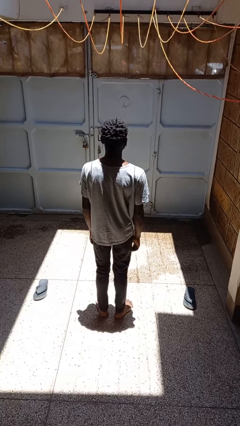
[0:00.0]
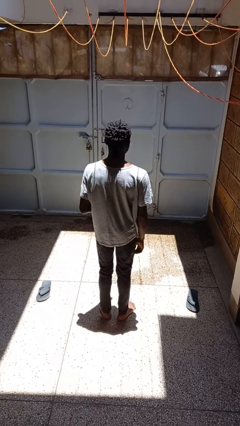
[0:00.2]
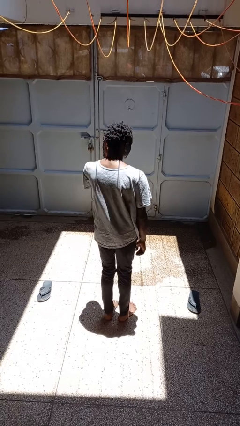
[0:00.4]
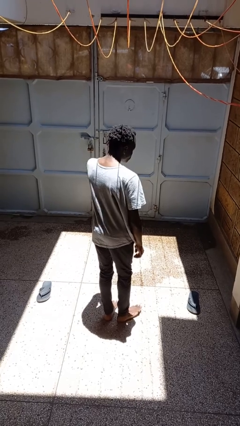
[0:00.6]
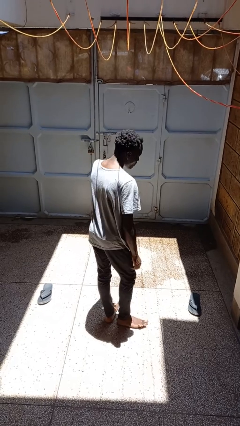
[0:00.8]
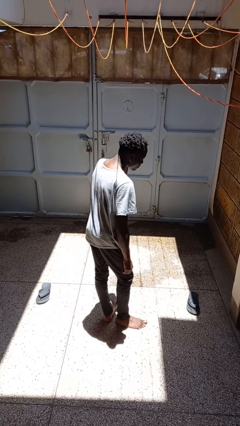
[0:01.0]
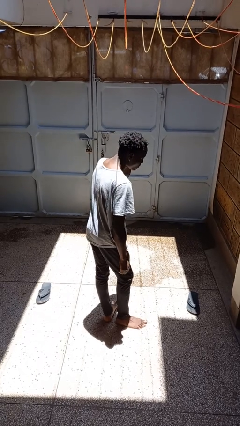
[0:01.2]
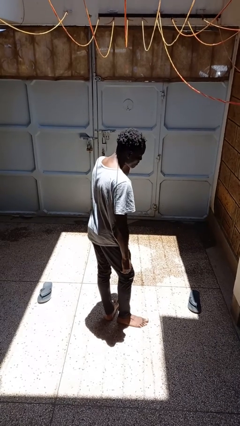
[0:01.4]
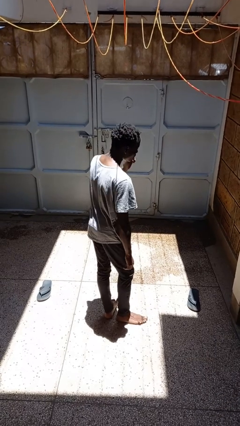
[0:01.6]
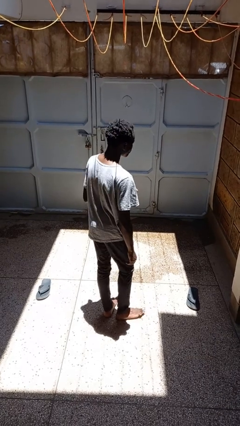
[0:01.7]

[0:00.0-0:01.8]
person touches earlobe

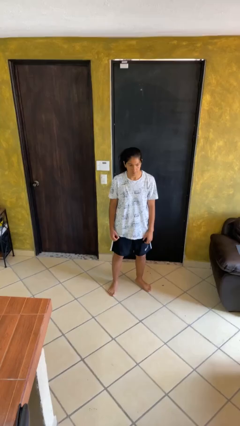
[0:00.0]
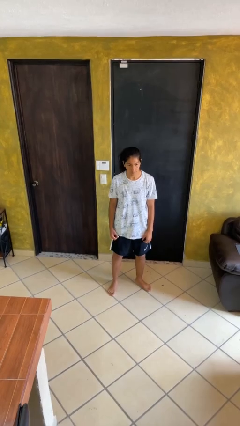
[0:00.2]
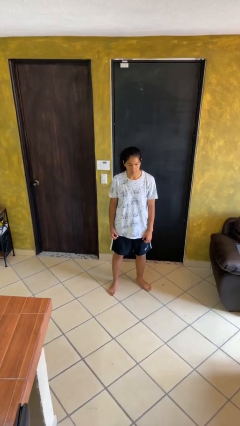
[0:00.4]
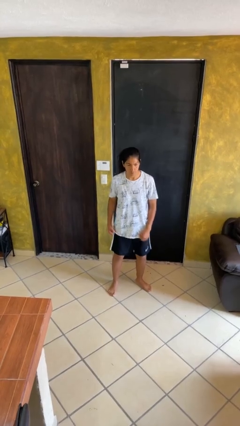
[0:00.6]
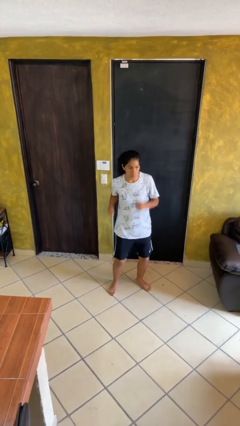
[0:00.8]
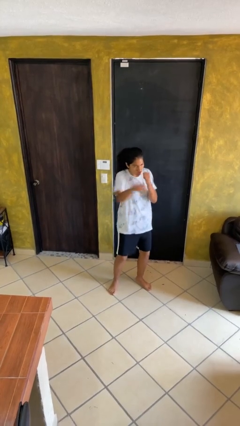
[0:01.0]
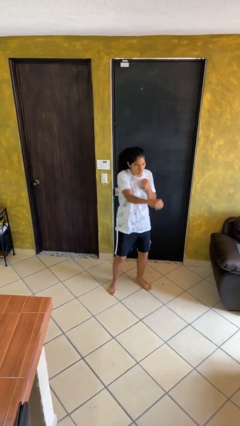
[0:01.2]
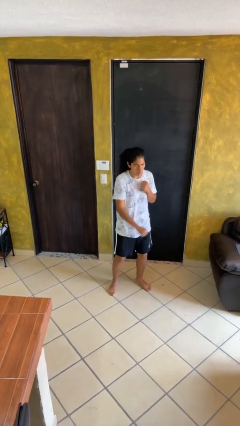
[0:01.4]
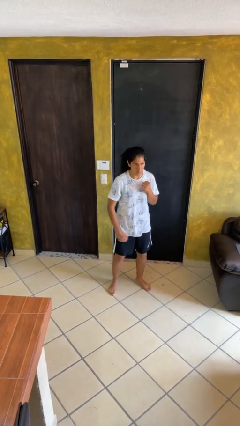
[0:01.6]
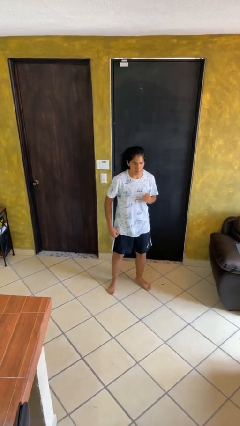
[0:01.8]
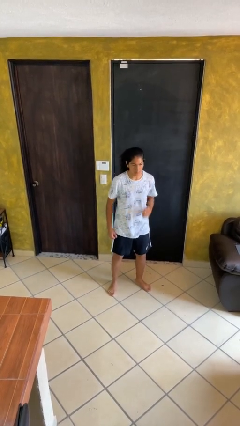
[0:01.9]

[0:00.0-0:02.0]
person punches

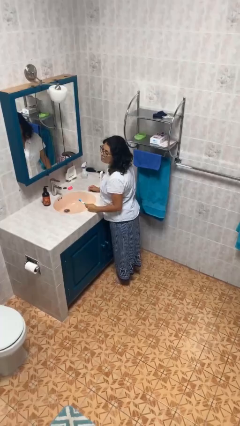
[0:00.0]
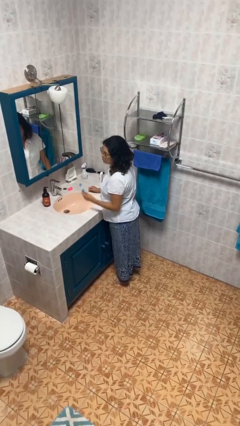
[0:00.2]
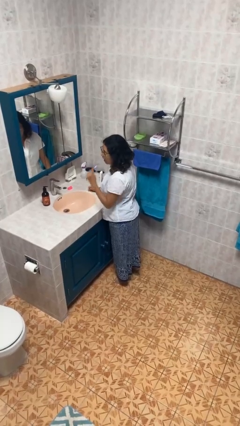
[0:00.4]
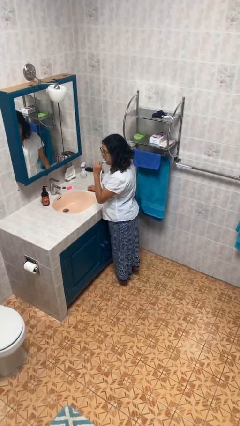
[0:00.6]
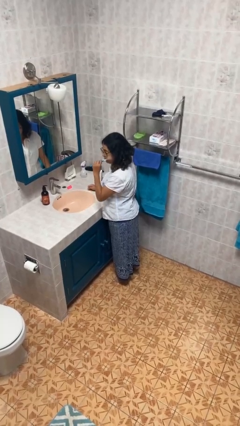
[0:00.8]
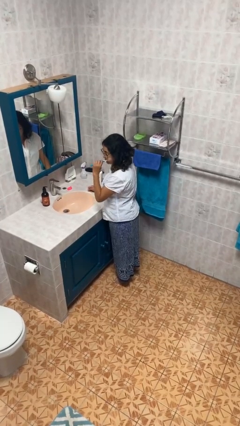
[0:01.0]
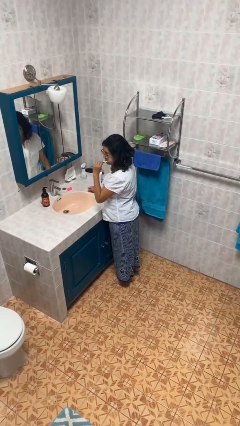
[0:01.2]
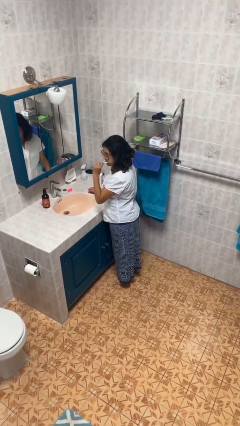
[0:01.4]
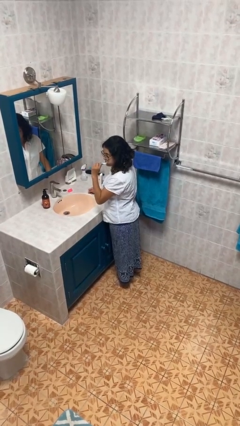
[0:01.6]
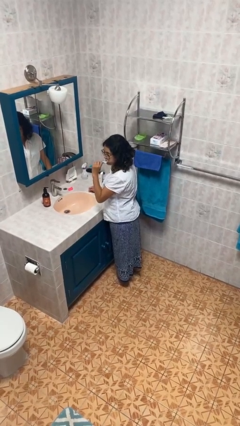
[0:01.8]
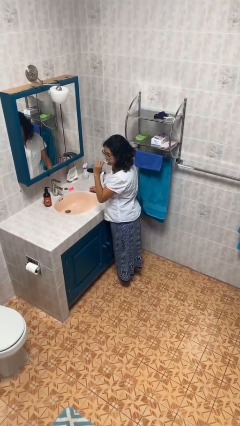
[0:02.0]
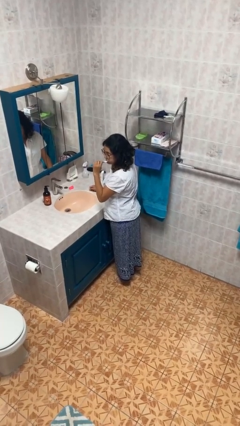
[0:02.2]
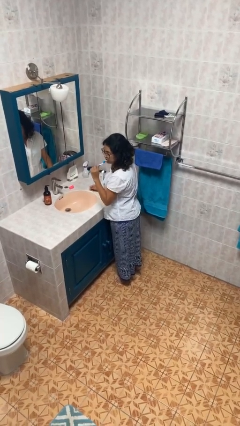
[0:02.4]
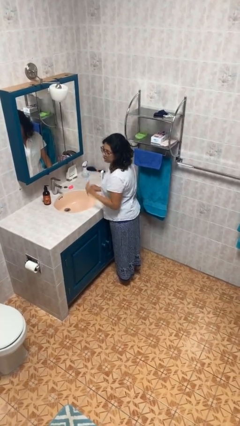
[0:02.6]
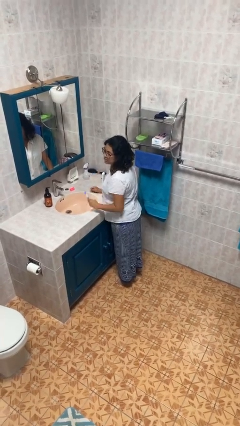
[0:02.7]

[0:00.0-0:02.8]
person brushes teeth

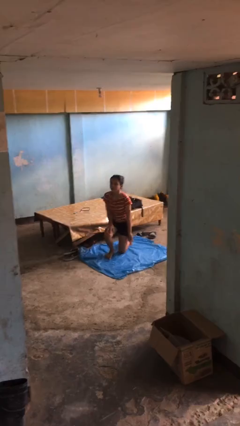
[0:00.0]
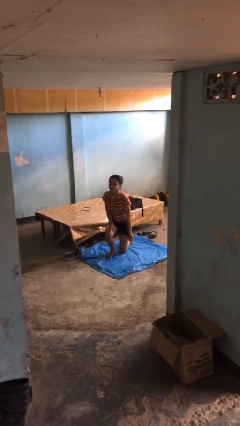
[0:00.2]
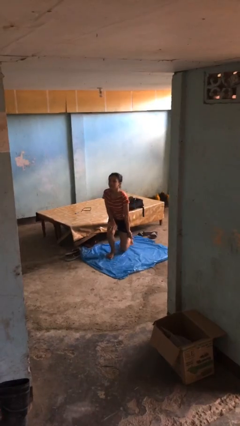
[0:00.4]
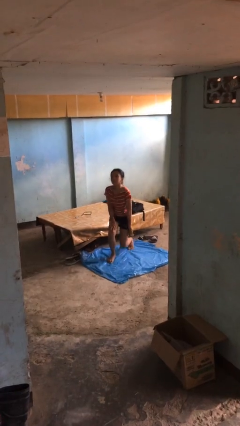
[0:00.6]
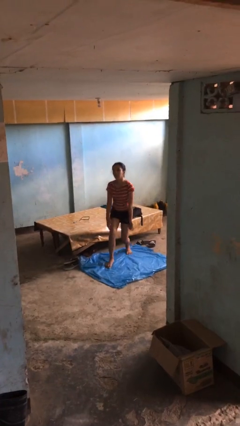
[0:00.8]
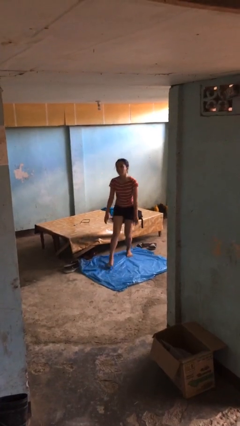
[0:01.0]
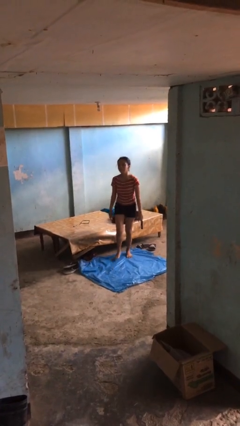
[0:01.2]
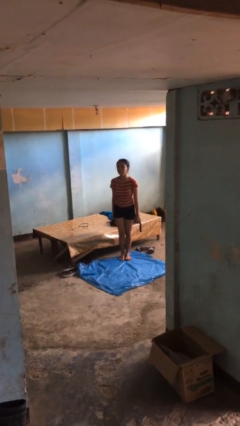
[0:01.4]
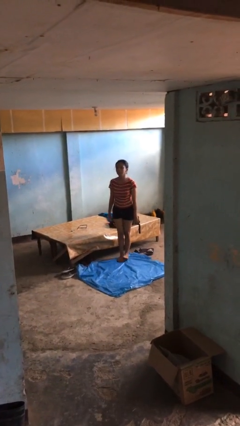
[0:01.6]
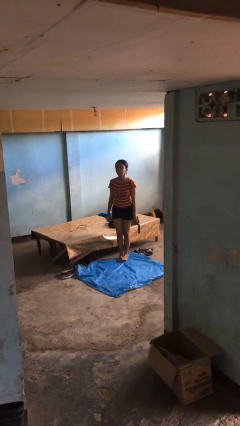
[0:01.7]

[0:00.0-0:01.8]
person stands up from floor

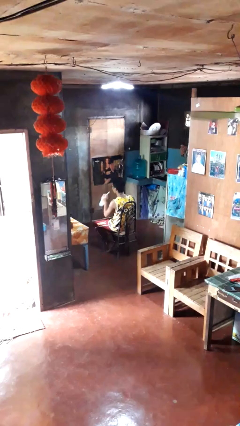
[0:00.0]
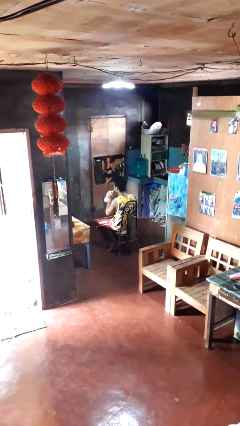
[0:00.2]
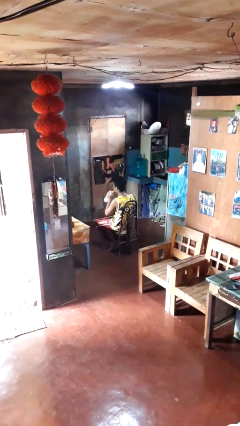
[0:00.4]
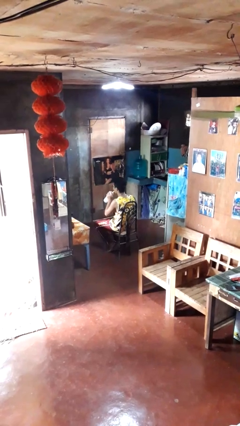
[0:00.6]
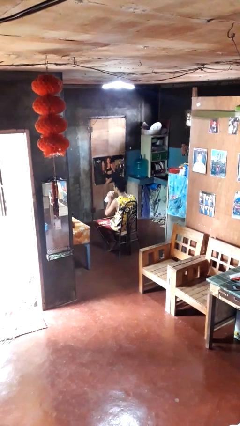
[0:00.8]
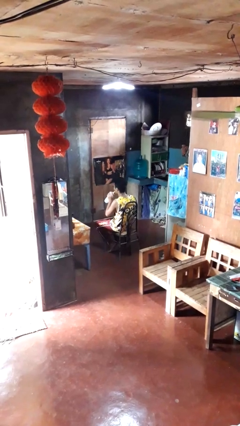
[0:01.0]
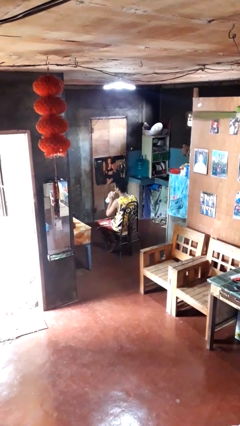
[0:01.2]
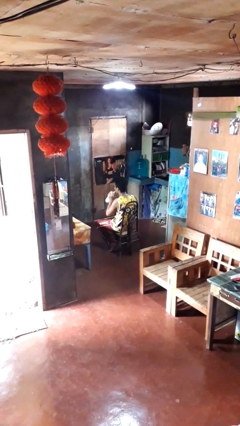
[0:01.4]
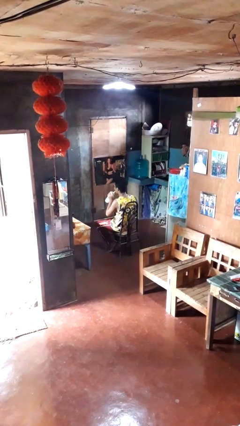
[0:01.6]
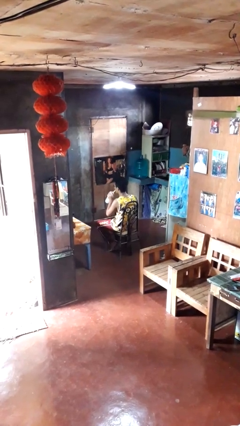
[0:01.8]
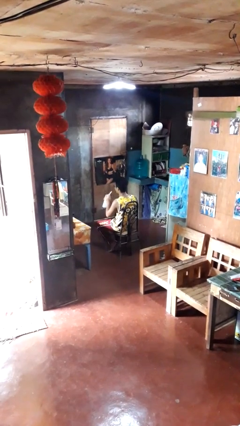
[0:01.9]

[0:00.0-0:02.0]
person drinks from straw

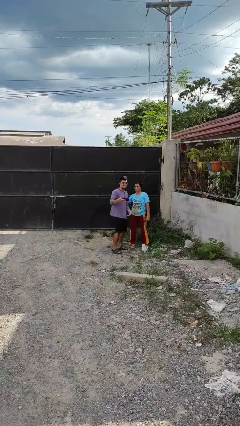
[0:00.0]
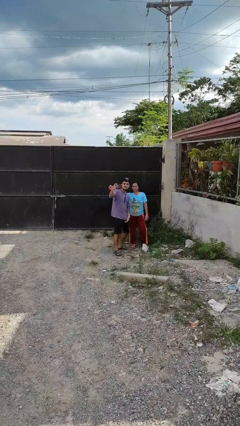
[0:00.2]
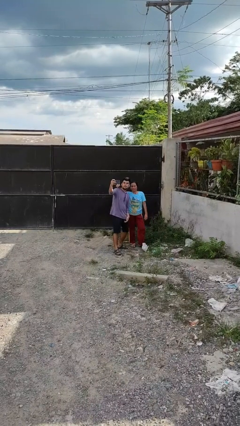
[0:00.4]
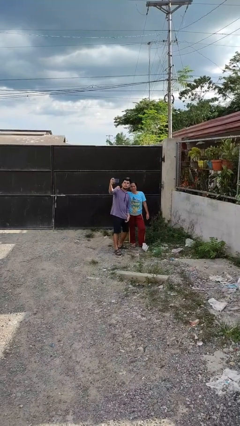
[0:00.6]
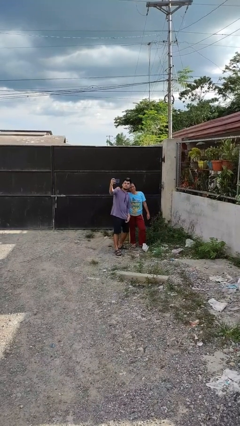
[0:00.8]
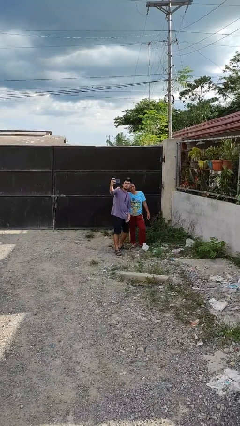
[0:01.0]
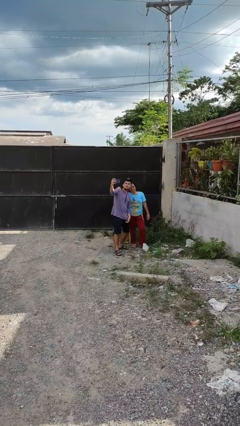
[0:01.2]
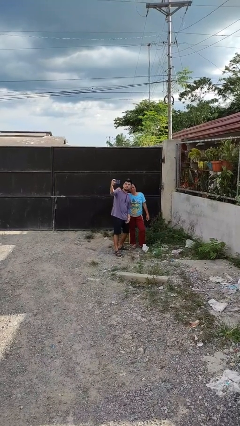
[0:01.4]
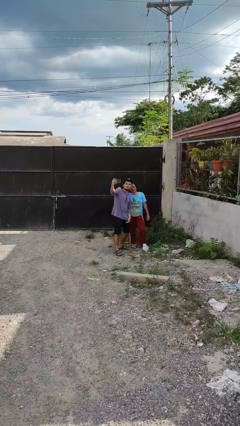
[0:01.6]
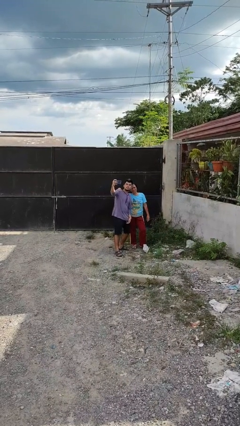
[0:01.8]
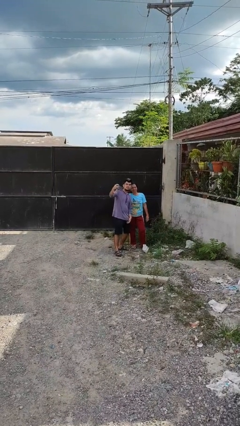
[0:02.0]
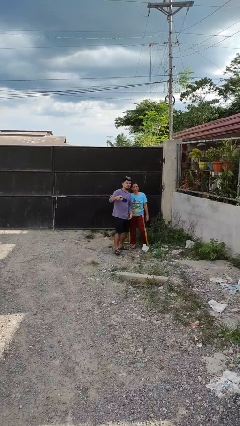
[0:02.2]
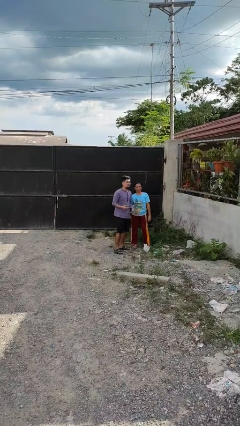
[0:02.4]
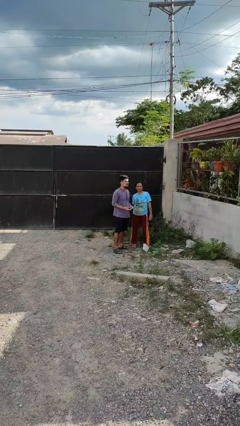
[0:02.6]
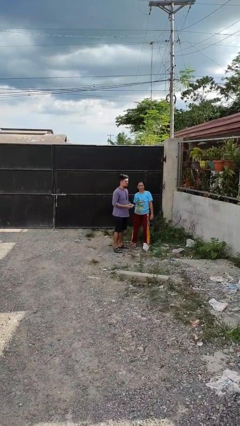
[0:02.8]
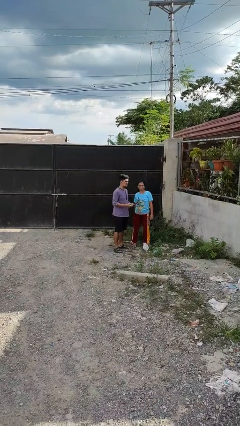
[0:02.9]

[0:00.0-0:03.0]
person takes selfie with person

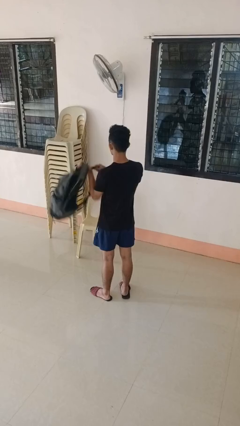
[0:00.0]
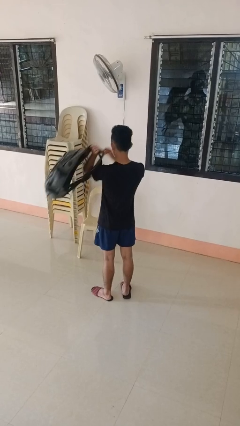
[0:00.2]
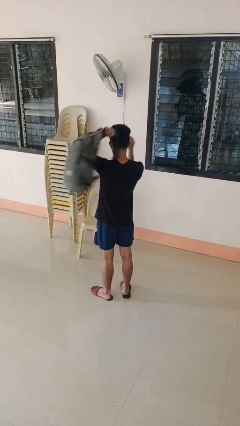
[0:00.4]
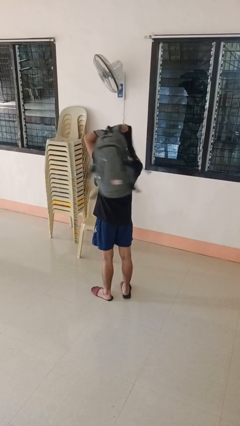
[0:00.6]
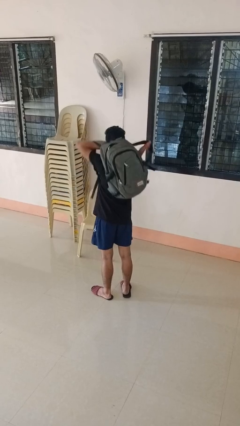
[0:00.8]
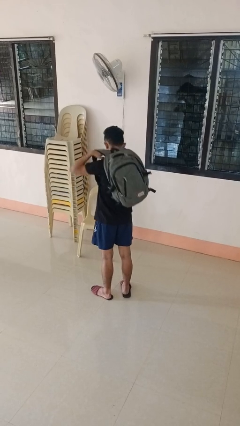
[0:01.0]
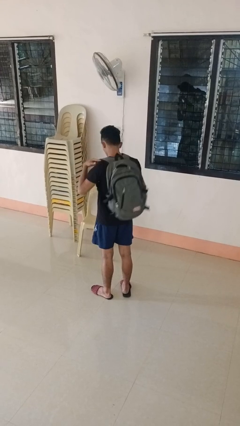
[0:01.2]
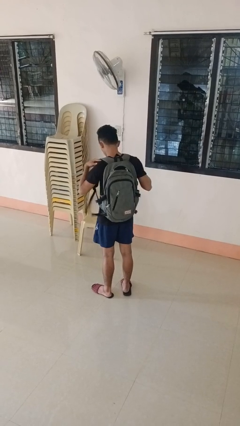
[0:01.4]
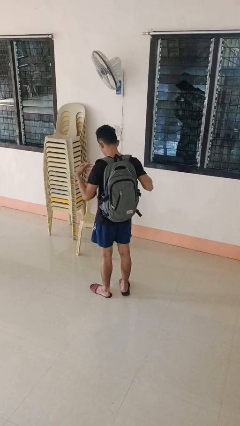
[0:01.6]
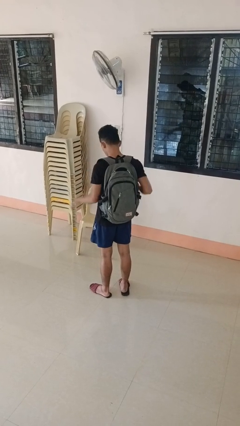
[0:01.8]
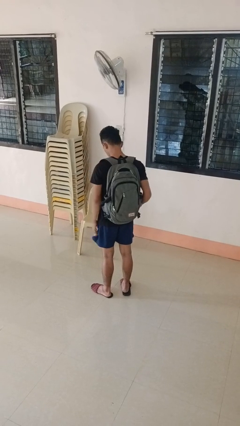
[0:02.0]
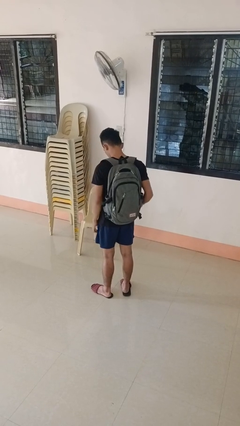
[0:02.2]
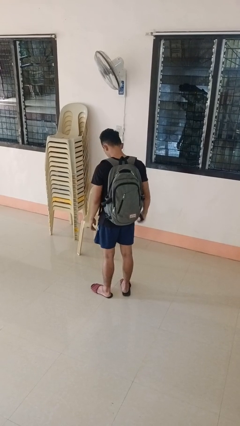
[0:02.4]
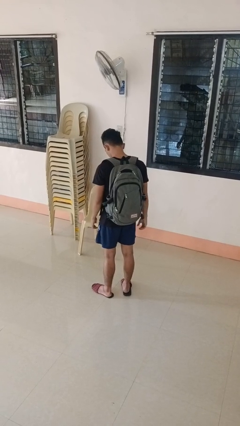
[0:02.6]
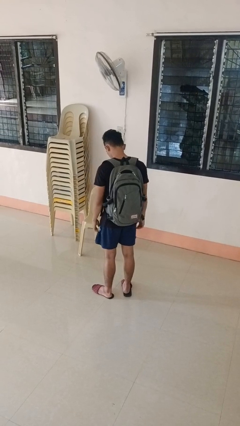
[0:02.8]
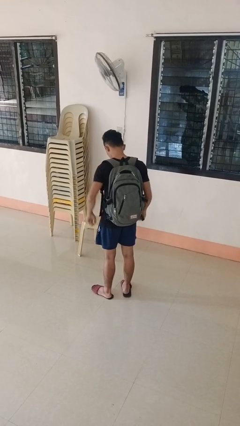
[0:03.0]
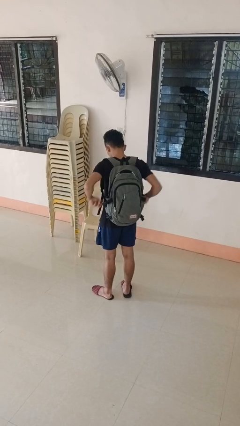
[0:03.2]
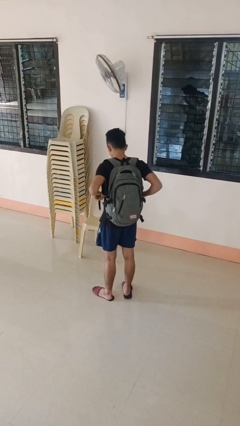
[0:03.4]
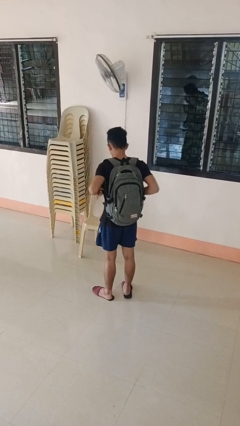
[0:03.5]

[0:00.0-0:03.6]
person puts on backpack

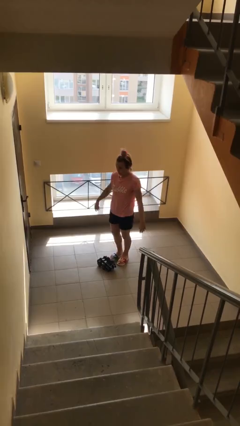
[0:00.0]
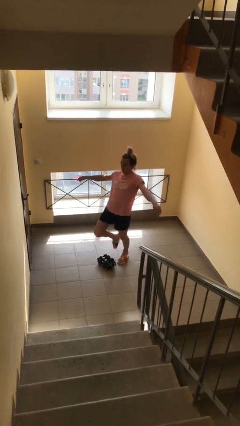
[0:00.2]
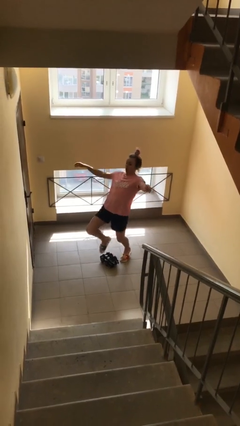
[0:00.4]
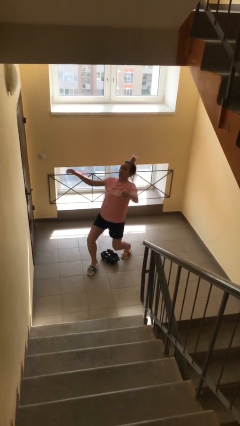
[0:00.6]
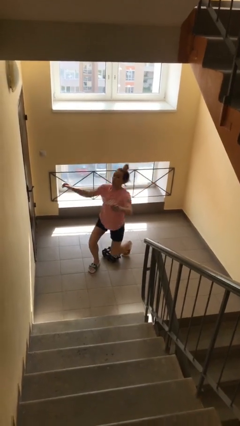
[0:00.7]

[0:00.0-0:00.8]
person trips on object on floor
